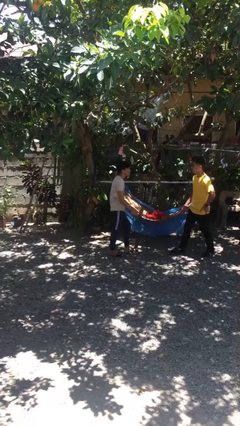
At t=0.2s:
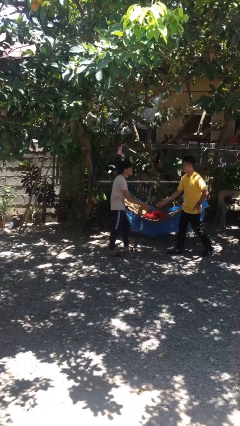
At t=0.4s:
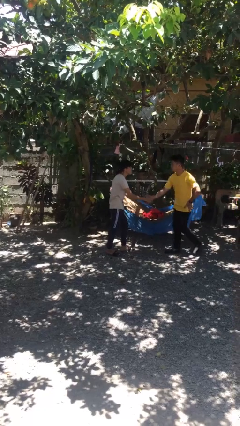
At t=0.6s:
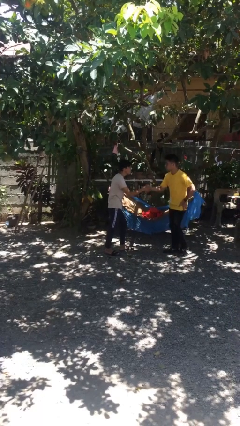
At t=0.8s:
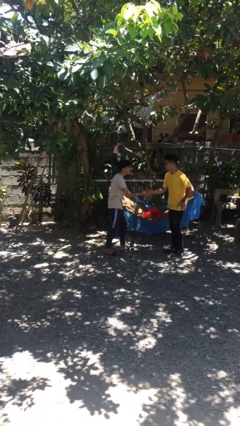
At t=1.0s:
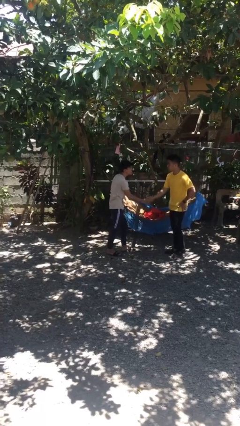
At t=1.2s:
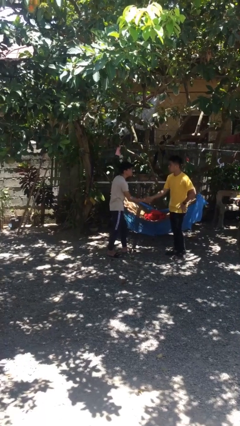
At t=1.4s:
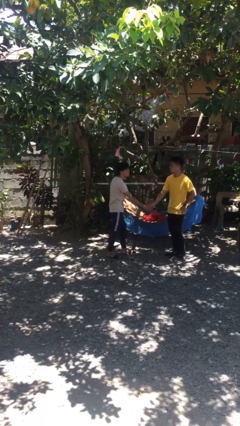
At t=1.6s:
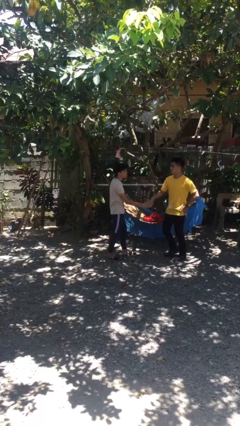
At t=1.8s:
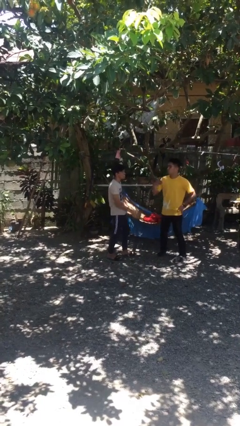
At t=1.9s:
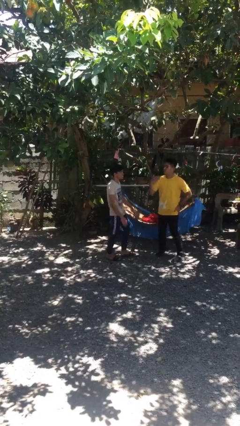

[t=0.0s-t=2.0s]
person shakes hand

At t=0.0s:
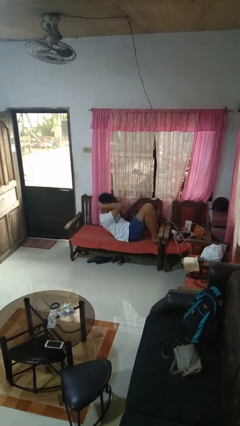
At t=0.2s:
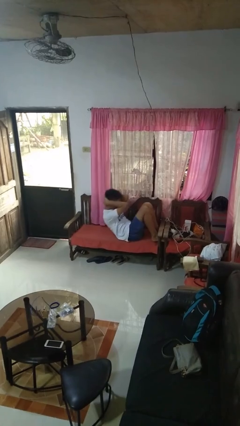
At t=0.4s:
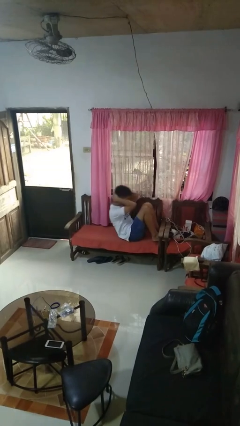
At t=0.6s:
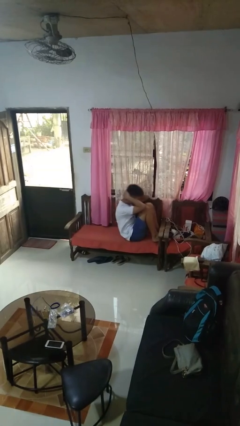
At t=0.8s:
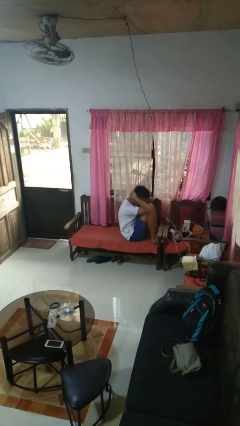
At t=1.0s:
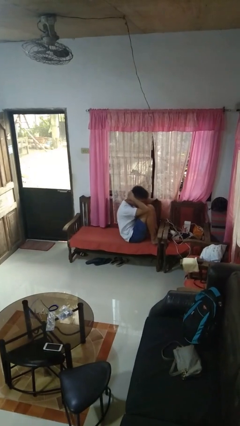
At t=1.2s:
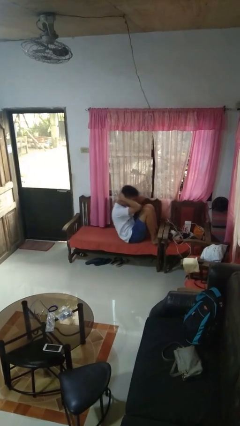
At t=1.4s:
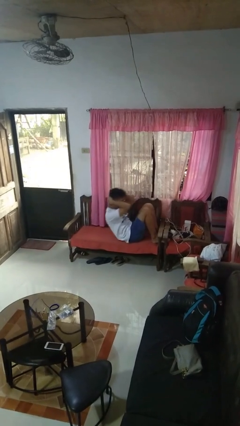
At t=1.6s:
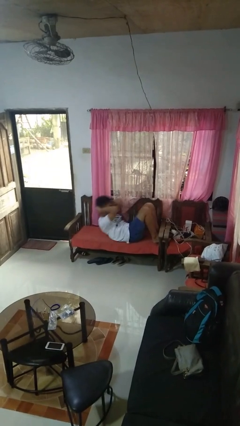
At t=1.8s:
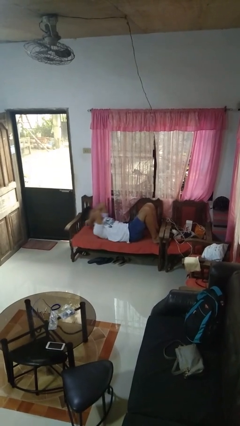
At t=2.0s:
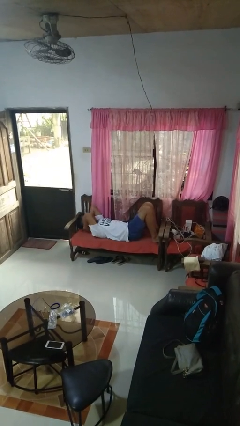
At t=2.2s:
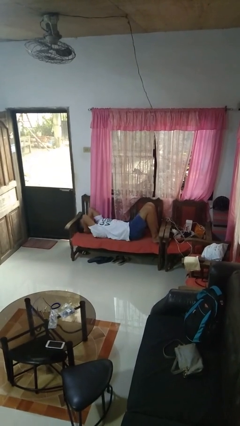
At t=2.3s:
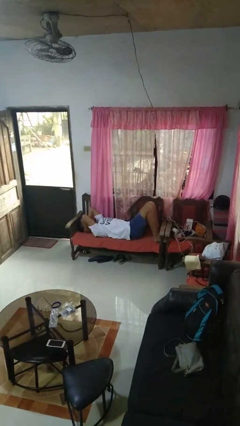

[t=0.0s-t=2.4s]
person exercises with situp

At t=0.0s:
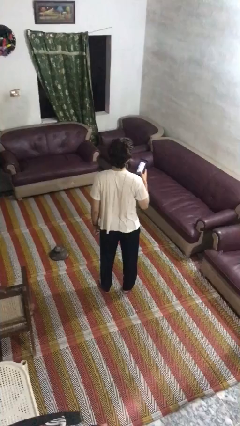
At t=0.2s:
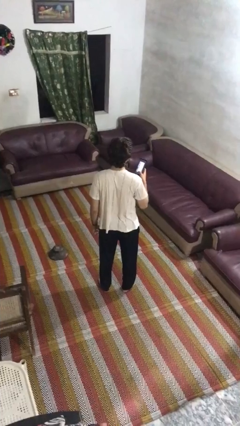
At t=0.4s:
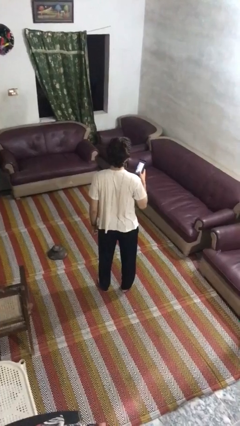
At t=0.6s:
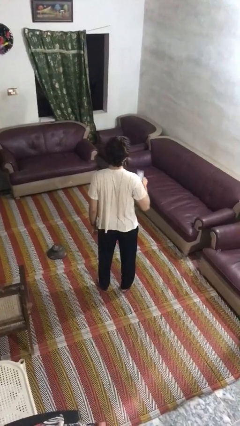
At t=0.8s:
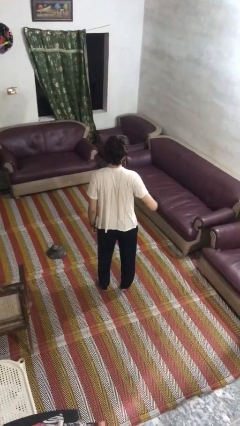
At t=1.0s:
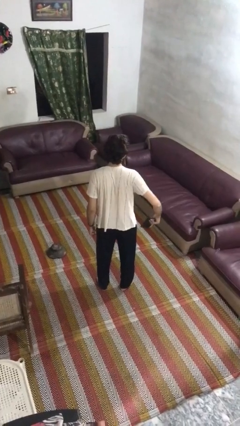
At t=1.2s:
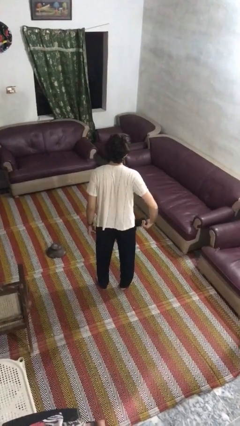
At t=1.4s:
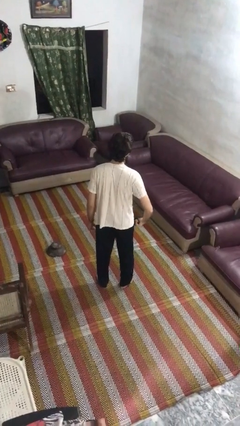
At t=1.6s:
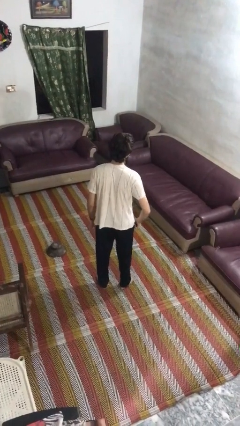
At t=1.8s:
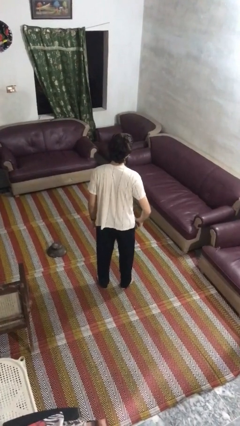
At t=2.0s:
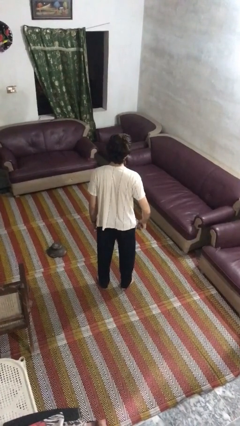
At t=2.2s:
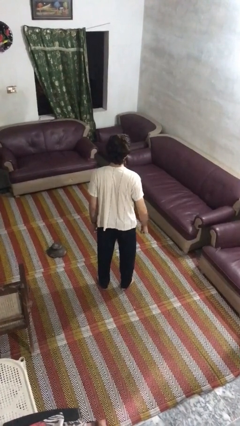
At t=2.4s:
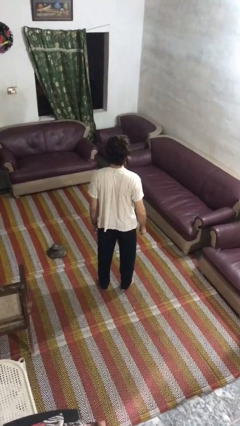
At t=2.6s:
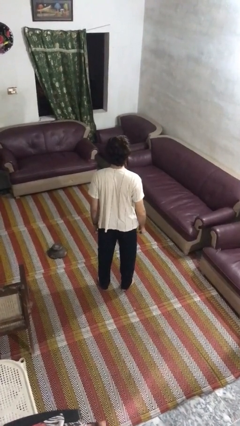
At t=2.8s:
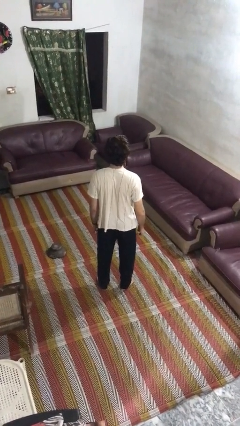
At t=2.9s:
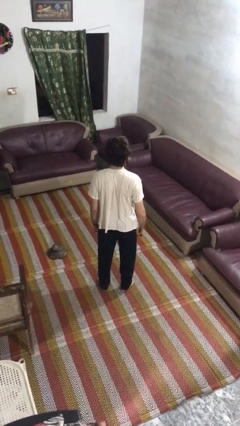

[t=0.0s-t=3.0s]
person puts phone into pocket

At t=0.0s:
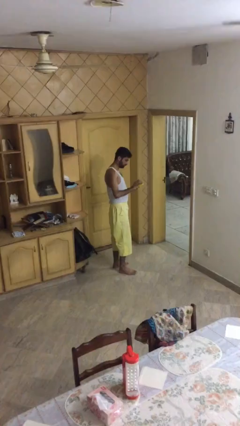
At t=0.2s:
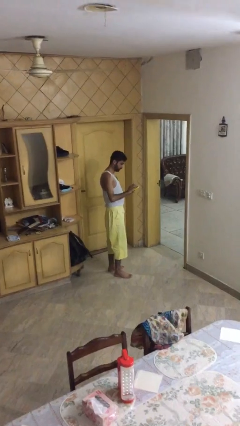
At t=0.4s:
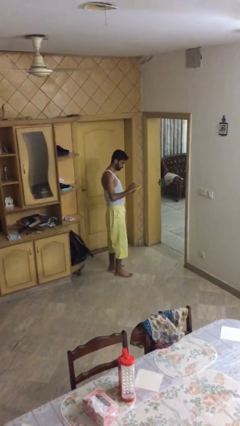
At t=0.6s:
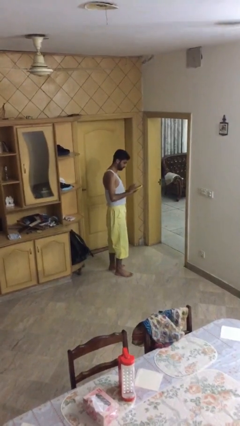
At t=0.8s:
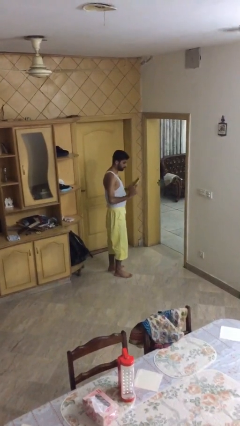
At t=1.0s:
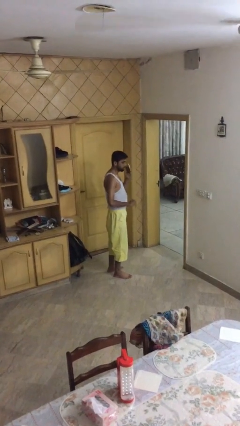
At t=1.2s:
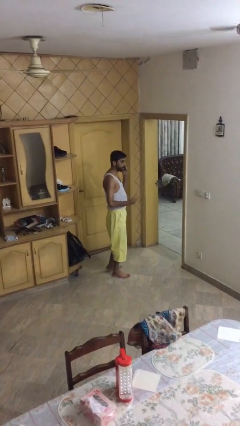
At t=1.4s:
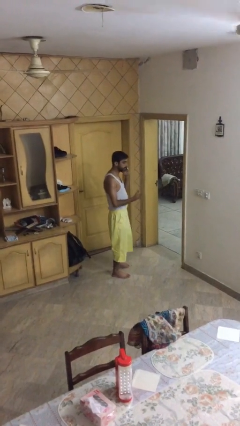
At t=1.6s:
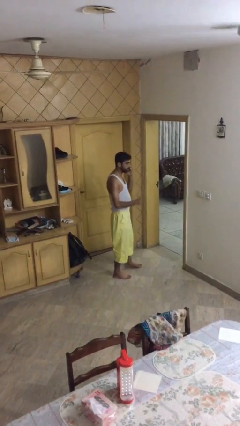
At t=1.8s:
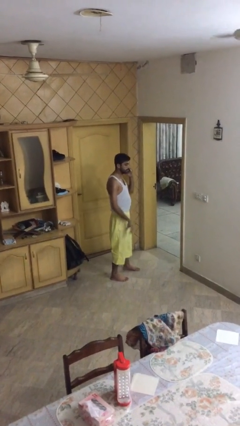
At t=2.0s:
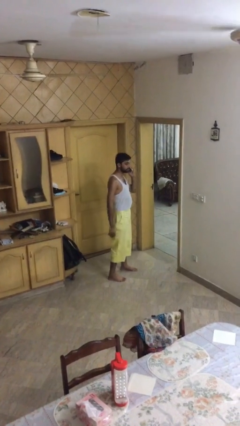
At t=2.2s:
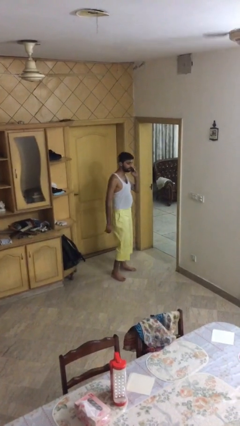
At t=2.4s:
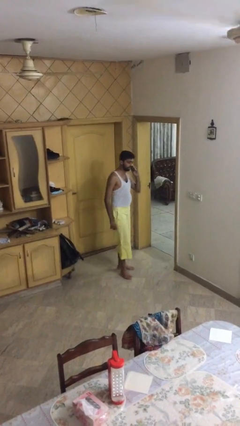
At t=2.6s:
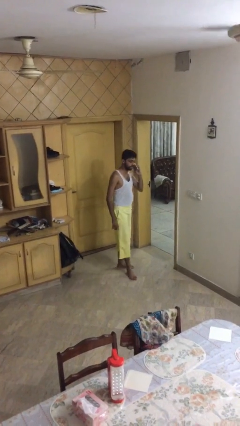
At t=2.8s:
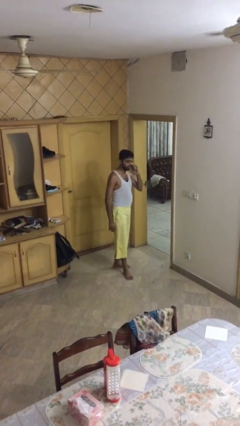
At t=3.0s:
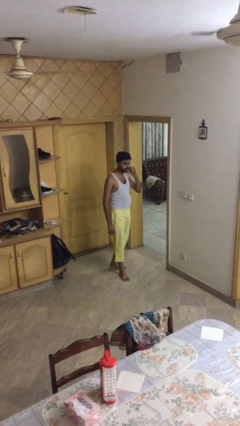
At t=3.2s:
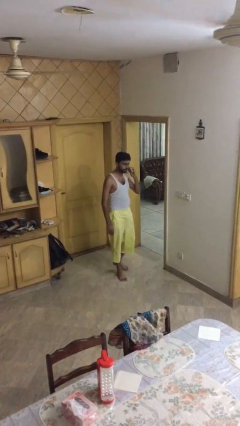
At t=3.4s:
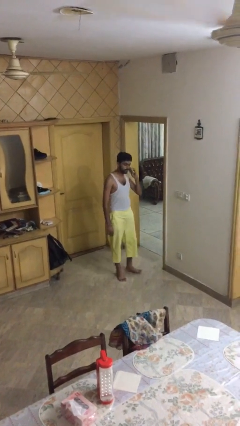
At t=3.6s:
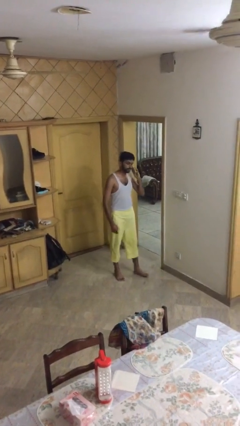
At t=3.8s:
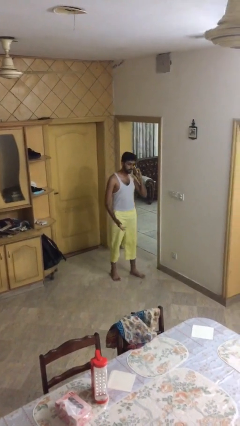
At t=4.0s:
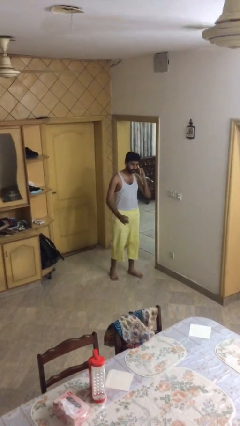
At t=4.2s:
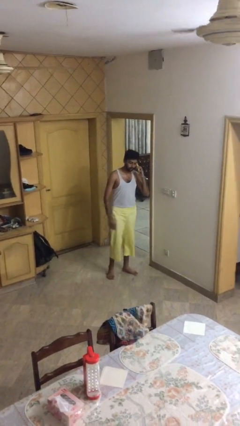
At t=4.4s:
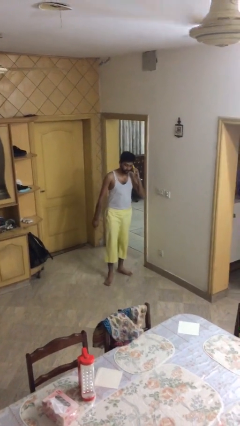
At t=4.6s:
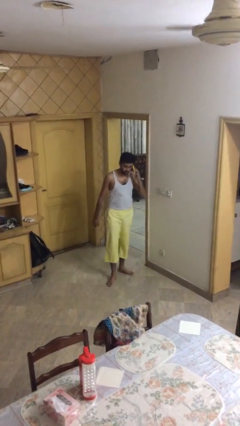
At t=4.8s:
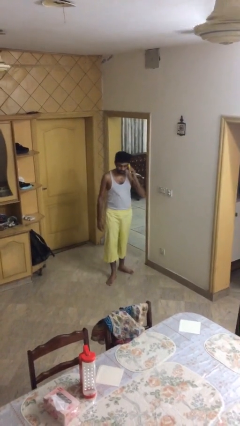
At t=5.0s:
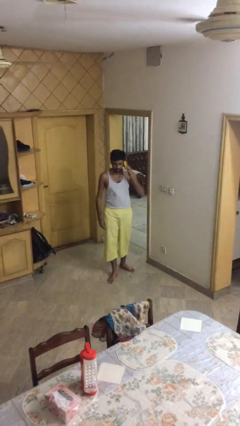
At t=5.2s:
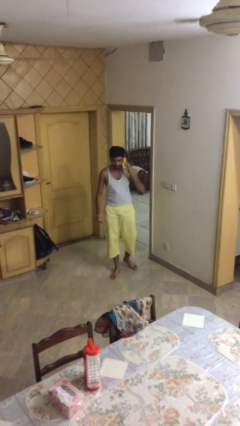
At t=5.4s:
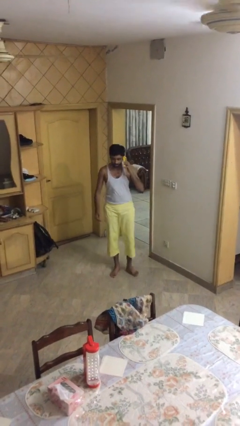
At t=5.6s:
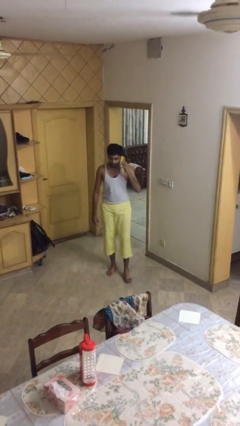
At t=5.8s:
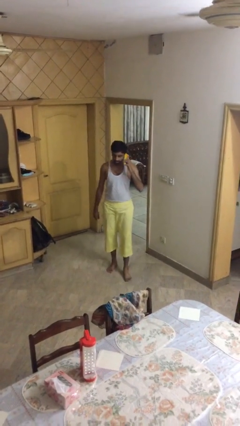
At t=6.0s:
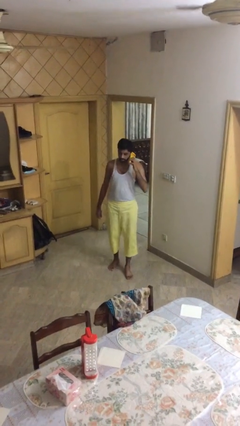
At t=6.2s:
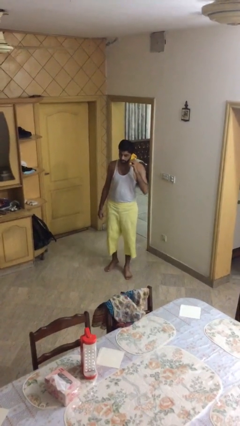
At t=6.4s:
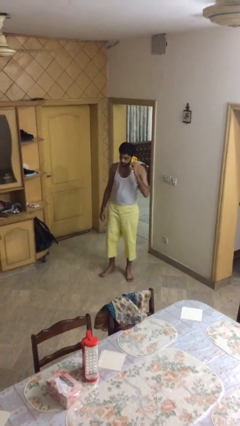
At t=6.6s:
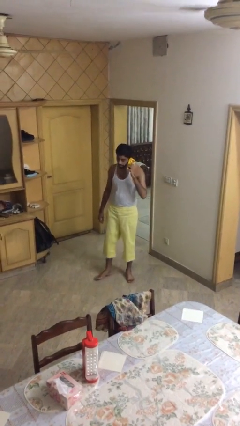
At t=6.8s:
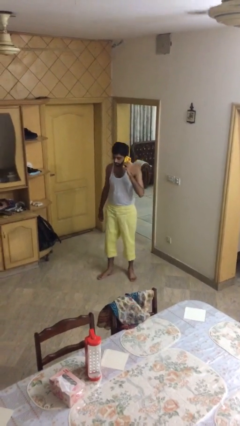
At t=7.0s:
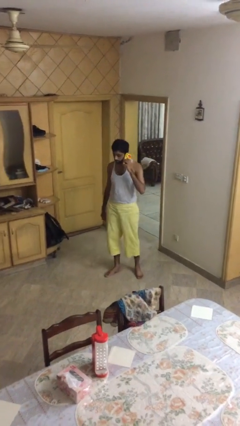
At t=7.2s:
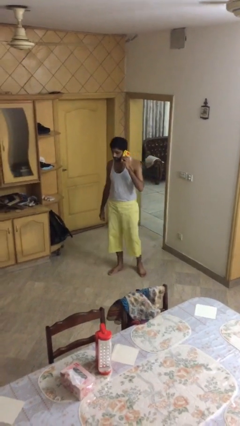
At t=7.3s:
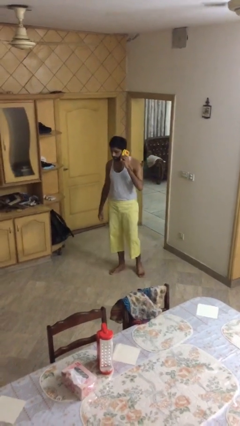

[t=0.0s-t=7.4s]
person talks on phone

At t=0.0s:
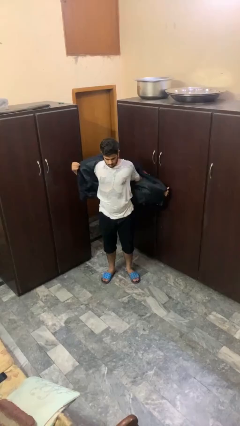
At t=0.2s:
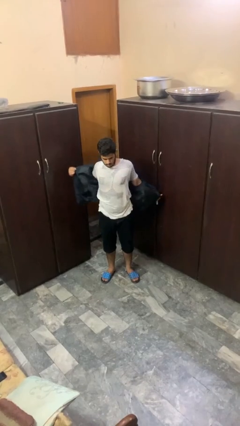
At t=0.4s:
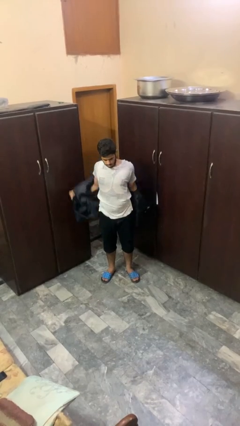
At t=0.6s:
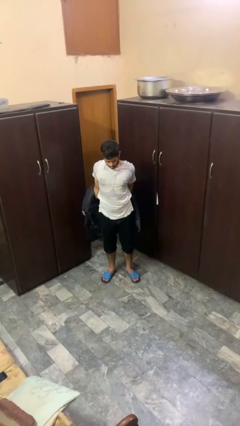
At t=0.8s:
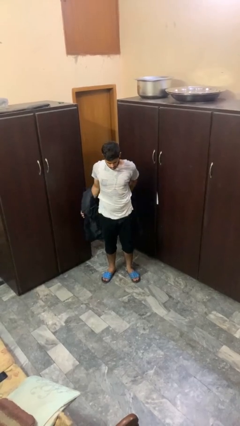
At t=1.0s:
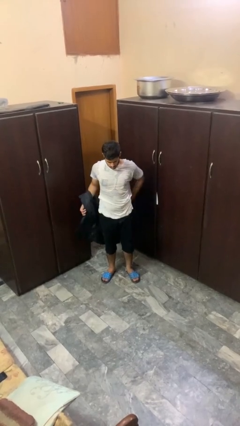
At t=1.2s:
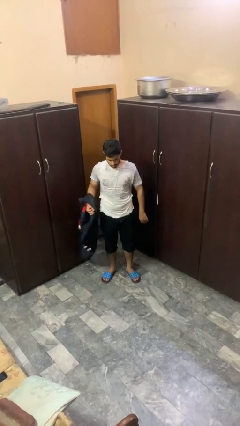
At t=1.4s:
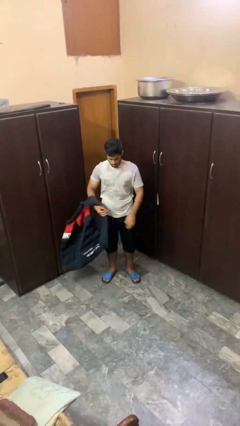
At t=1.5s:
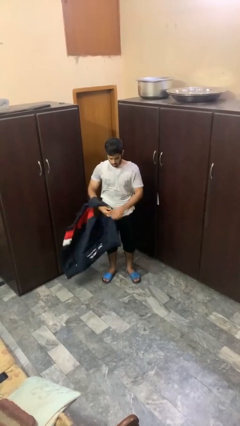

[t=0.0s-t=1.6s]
person takes off jacket

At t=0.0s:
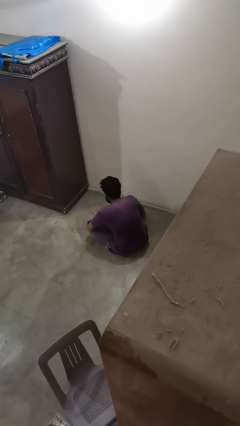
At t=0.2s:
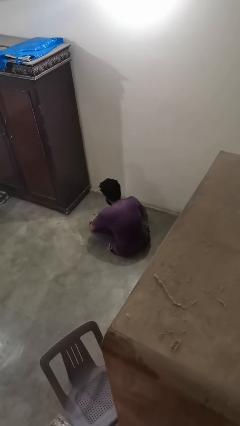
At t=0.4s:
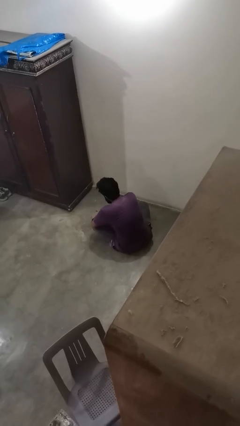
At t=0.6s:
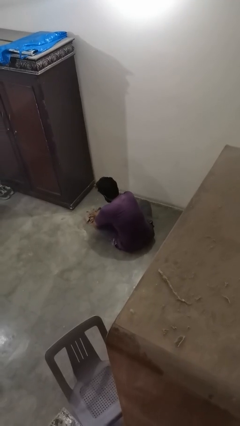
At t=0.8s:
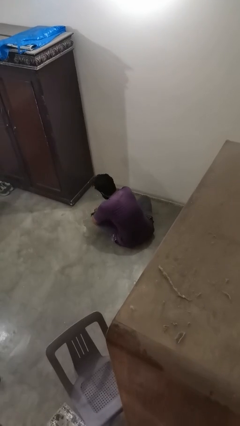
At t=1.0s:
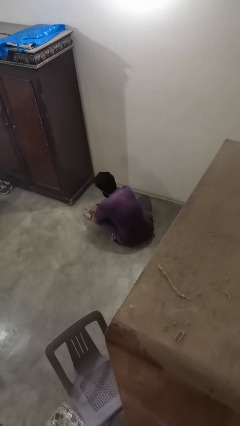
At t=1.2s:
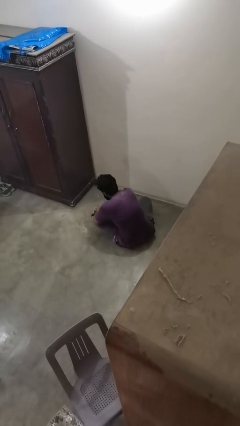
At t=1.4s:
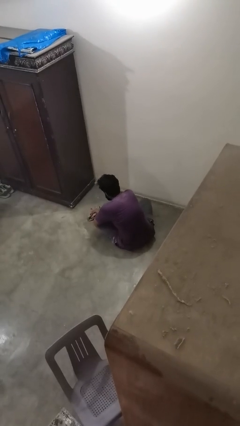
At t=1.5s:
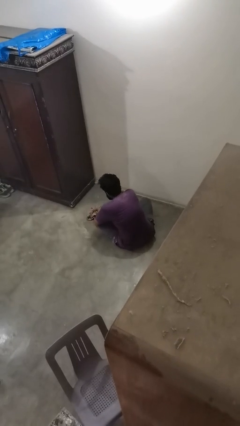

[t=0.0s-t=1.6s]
person mops
